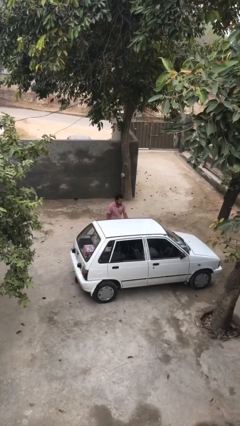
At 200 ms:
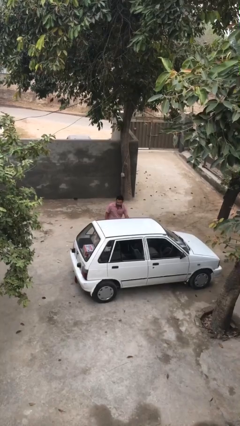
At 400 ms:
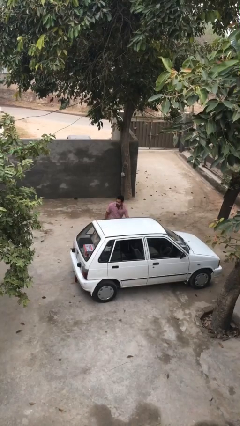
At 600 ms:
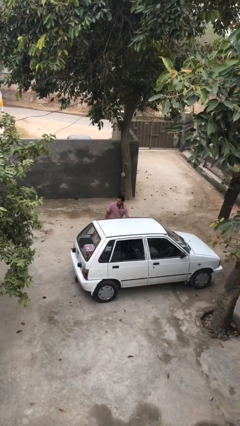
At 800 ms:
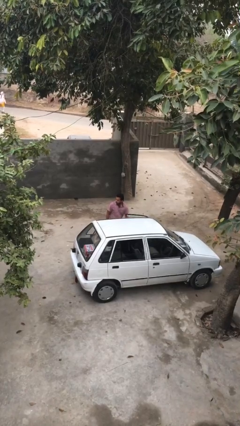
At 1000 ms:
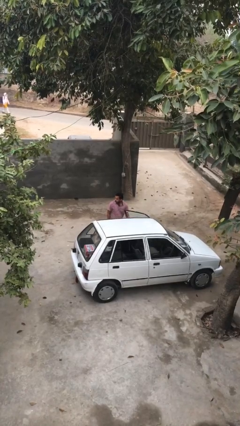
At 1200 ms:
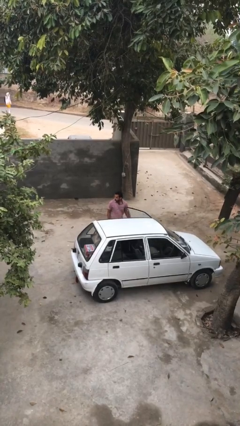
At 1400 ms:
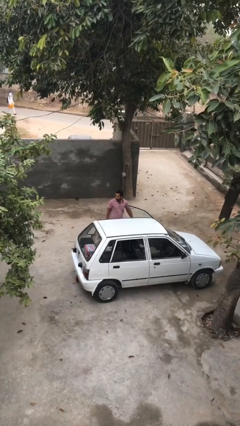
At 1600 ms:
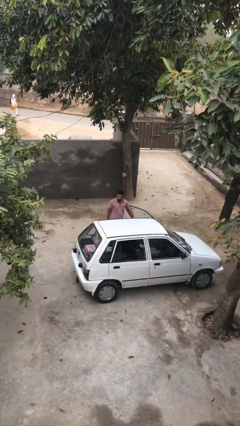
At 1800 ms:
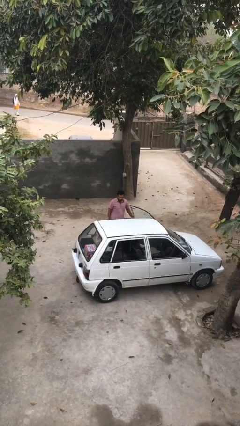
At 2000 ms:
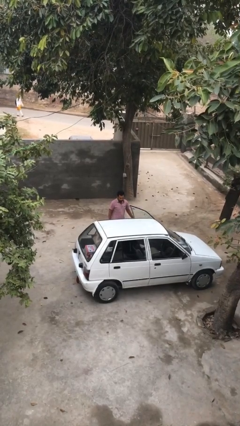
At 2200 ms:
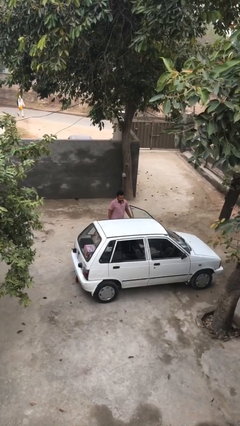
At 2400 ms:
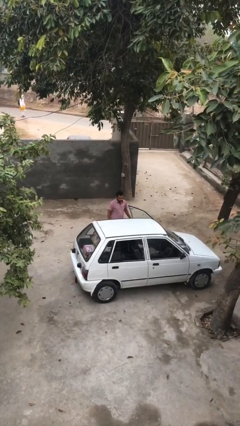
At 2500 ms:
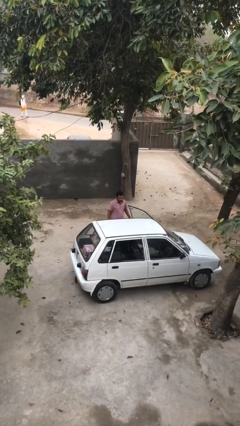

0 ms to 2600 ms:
person opens car door

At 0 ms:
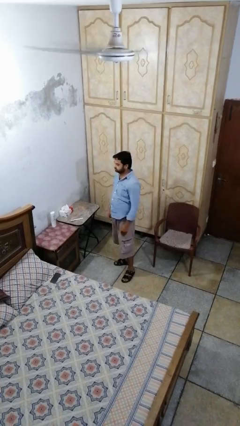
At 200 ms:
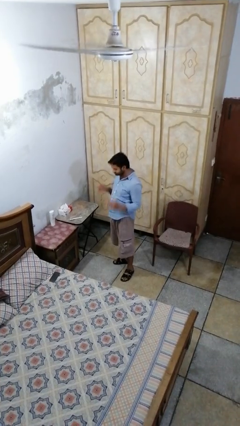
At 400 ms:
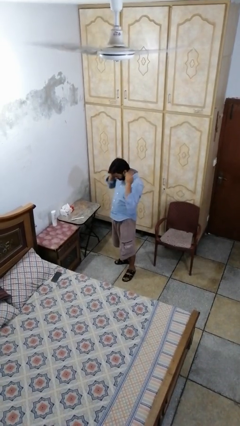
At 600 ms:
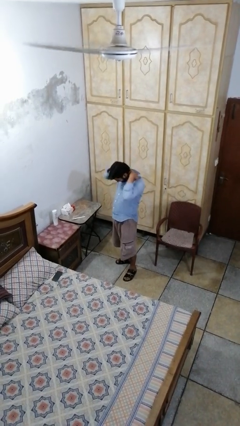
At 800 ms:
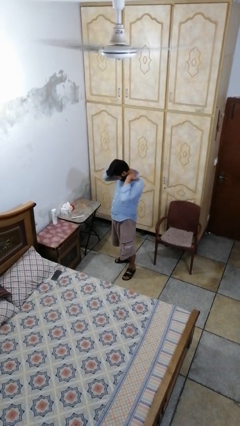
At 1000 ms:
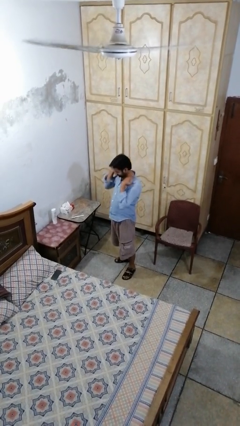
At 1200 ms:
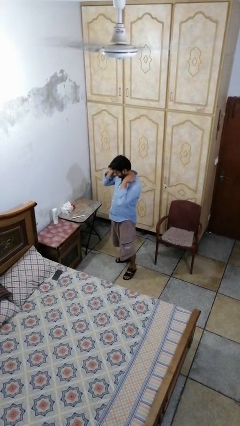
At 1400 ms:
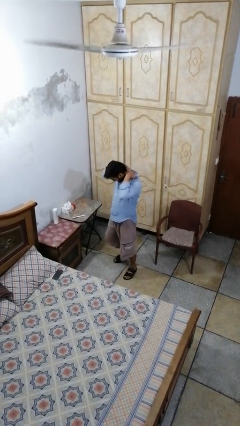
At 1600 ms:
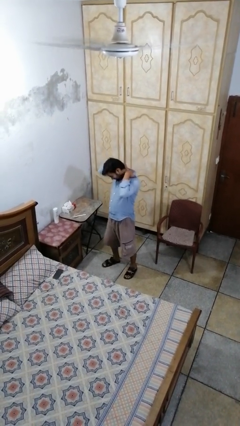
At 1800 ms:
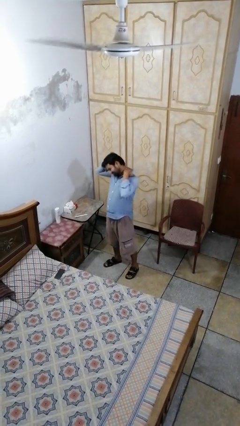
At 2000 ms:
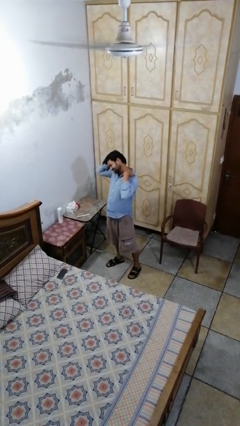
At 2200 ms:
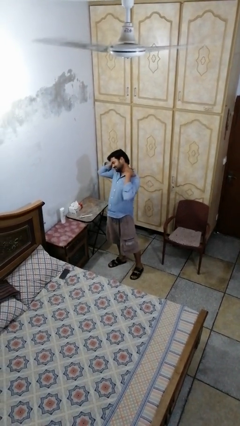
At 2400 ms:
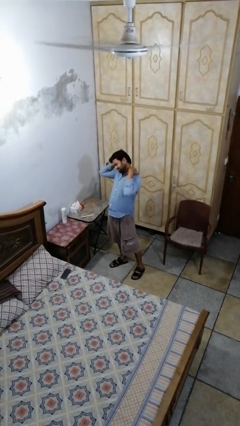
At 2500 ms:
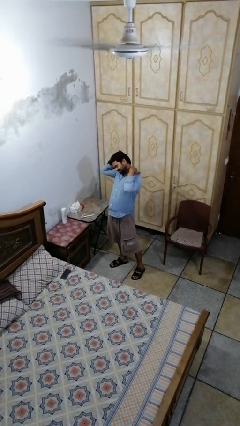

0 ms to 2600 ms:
person rubs neck

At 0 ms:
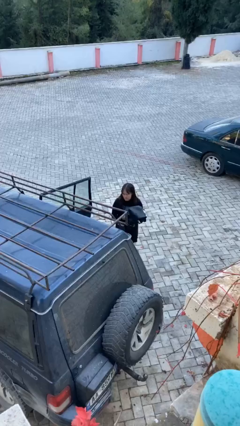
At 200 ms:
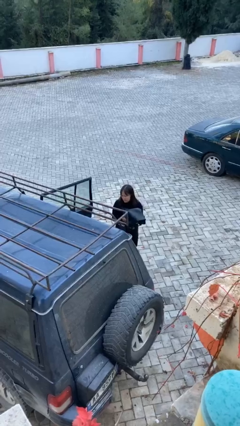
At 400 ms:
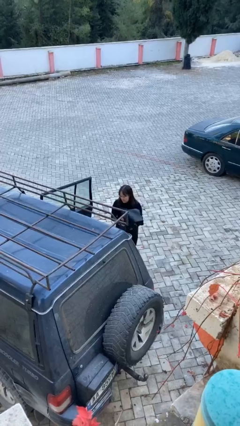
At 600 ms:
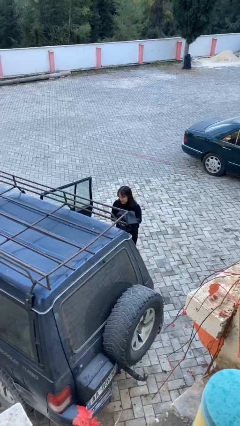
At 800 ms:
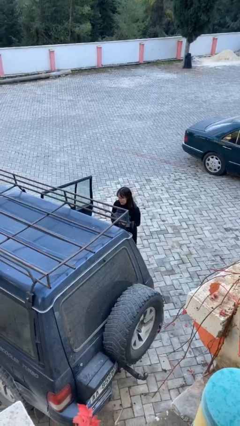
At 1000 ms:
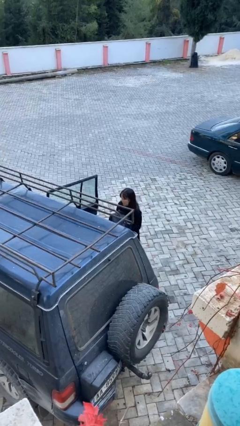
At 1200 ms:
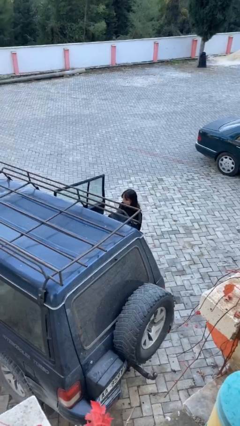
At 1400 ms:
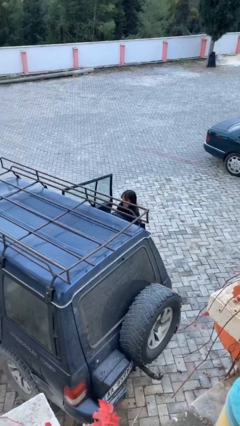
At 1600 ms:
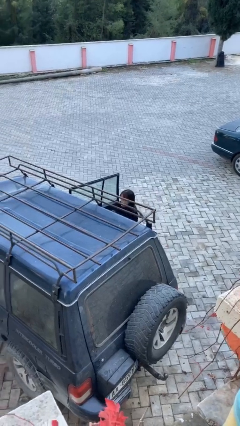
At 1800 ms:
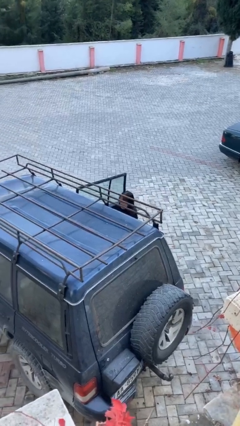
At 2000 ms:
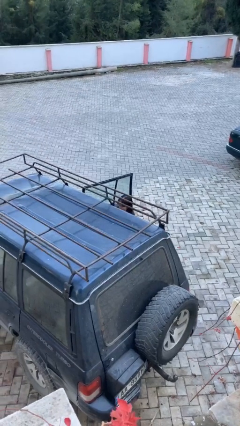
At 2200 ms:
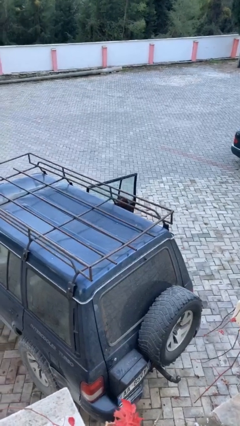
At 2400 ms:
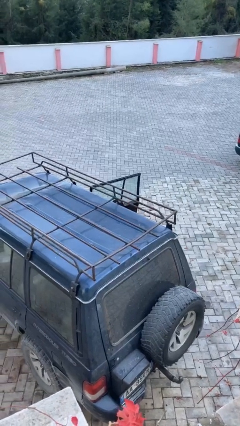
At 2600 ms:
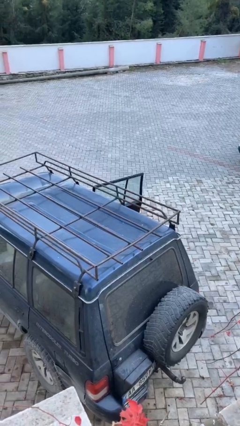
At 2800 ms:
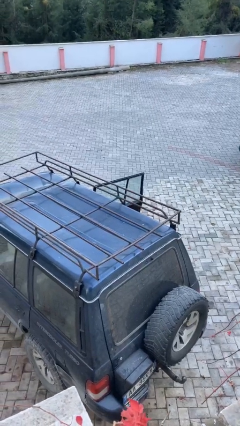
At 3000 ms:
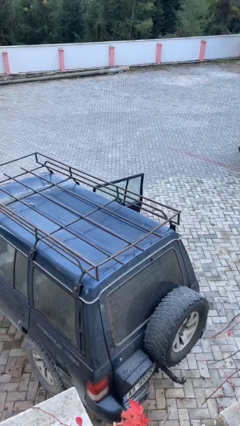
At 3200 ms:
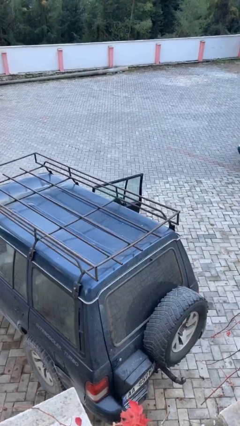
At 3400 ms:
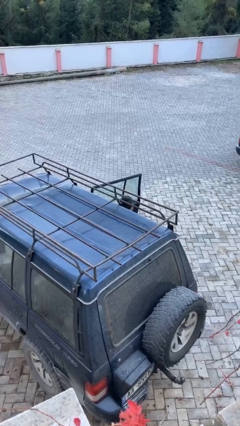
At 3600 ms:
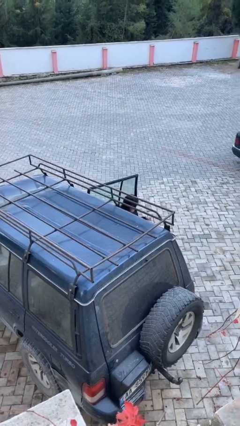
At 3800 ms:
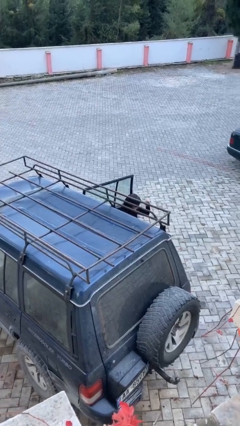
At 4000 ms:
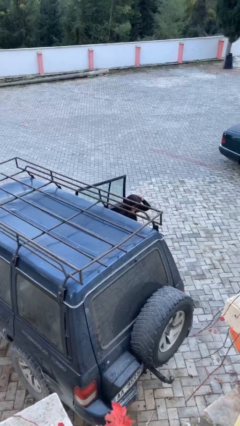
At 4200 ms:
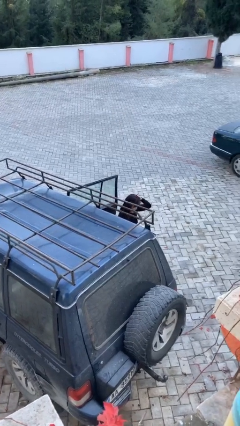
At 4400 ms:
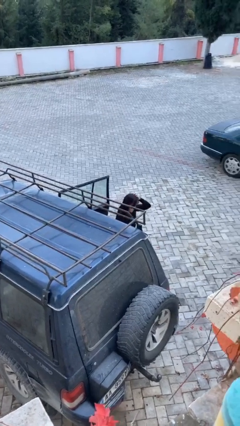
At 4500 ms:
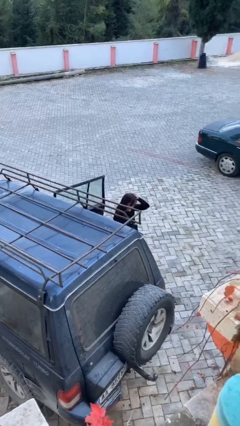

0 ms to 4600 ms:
person loads car

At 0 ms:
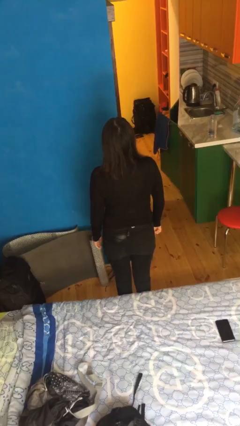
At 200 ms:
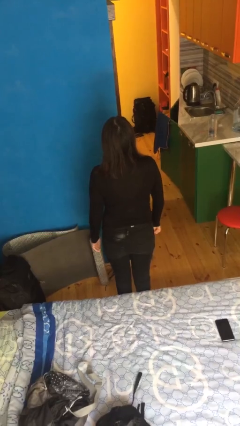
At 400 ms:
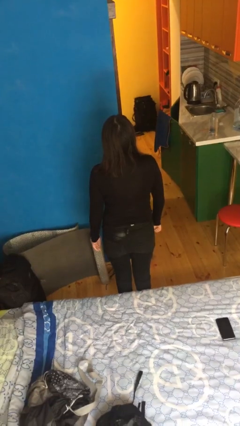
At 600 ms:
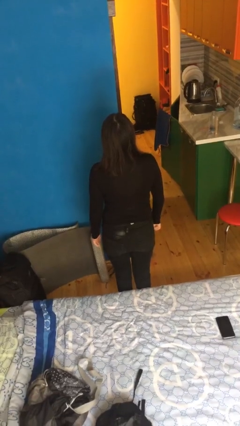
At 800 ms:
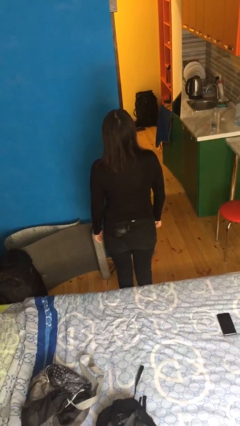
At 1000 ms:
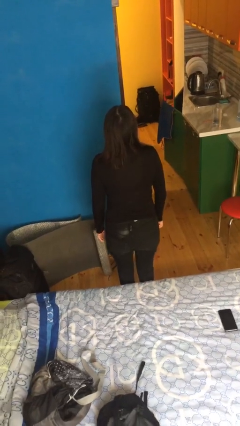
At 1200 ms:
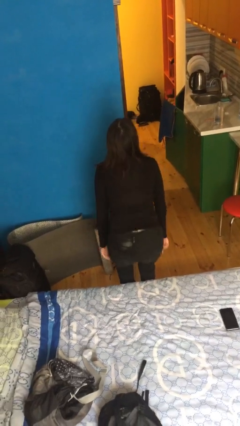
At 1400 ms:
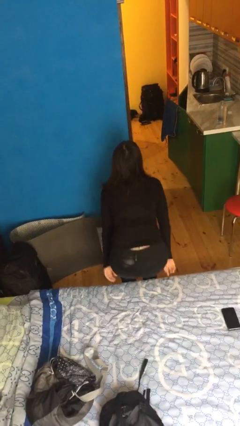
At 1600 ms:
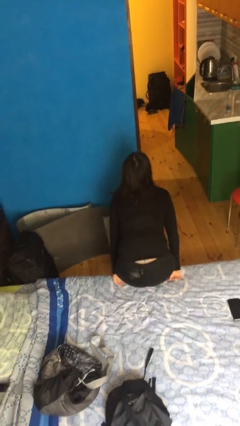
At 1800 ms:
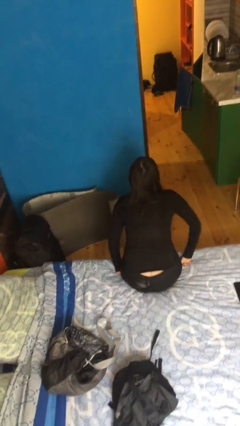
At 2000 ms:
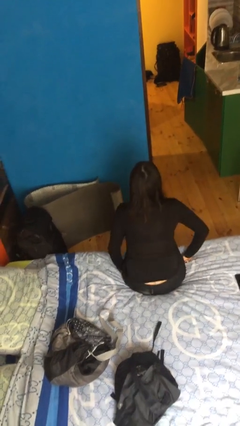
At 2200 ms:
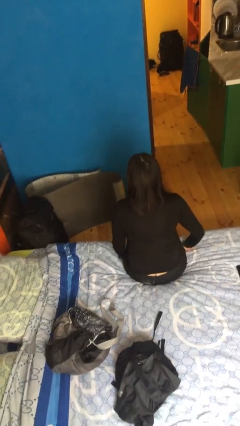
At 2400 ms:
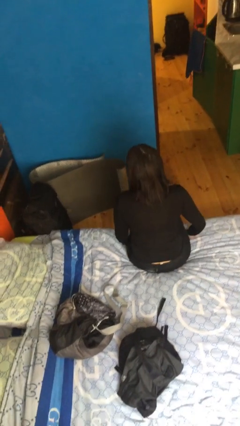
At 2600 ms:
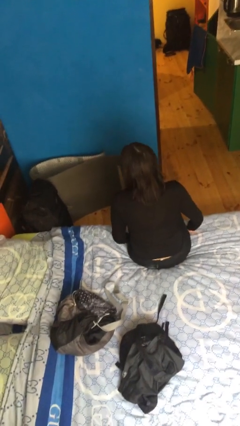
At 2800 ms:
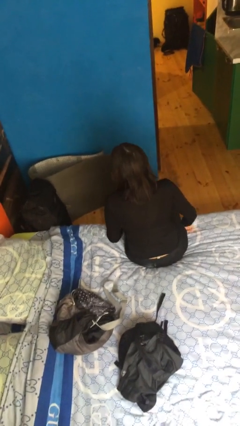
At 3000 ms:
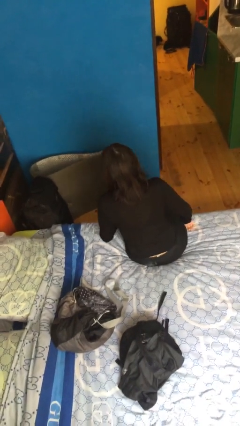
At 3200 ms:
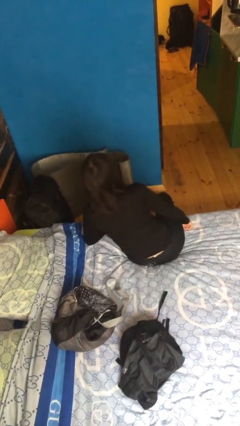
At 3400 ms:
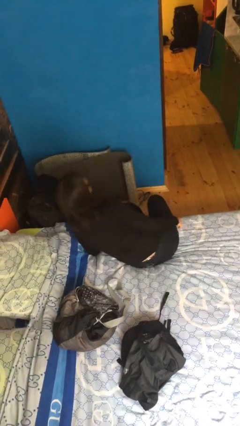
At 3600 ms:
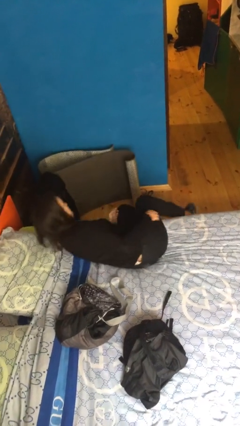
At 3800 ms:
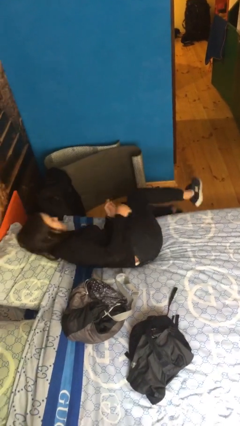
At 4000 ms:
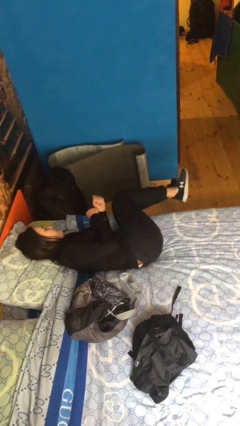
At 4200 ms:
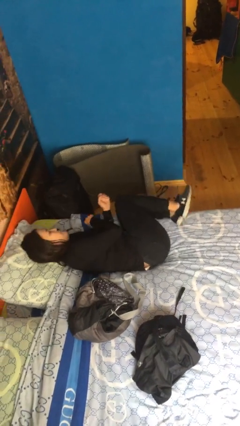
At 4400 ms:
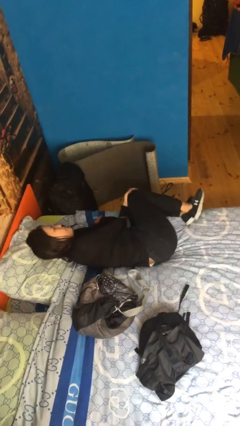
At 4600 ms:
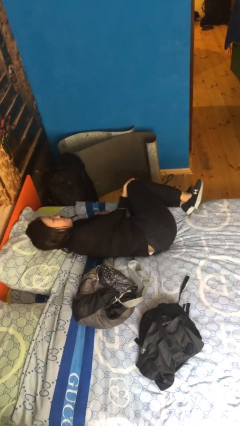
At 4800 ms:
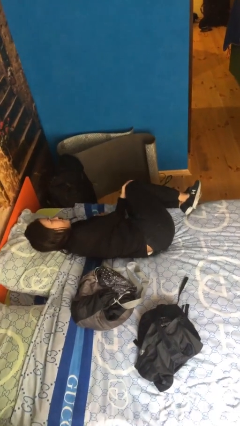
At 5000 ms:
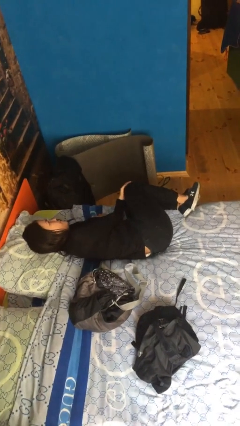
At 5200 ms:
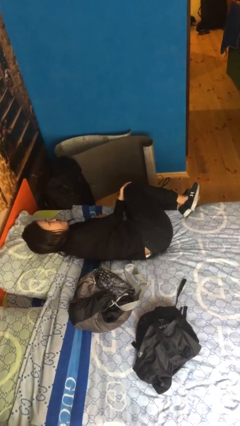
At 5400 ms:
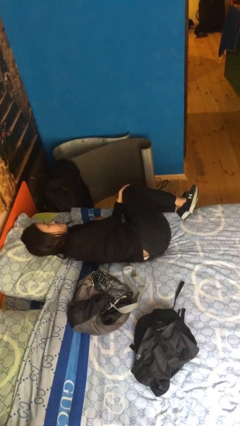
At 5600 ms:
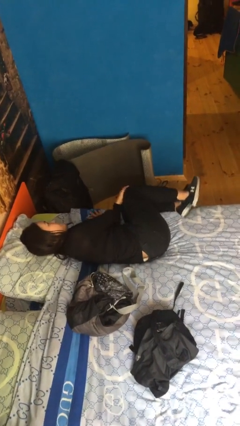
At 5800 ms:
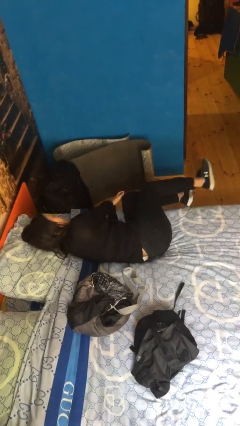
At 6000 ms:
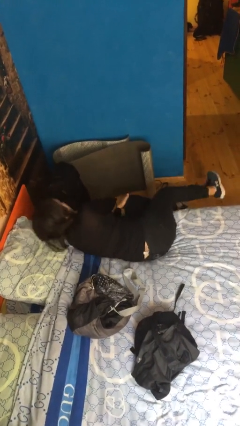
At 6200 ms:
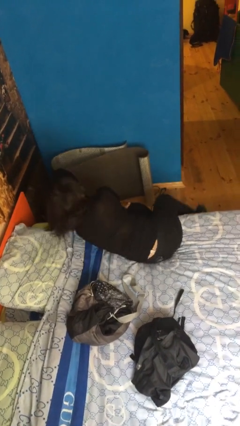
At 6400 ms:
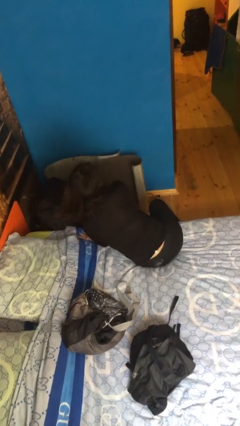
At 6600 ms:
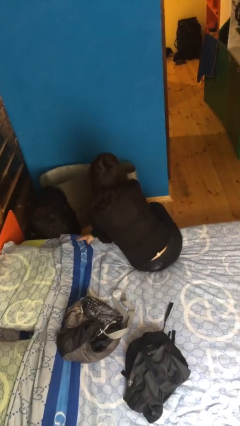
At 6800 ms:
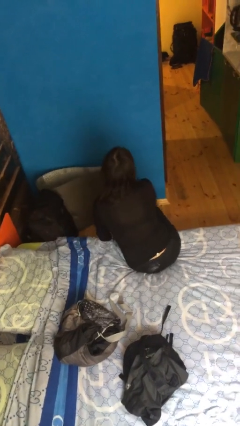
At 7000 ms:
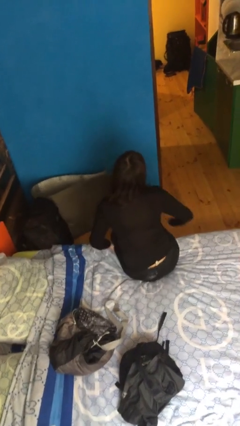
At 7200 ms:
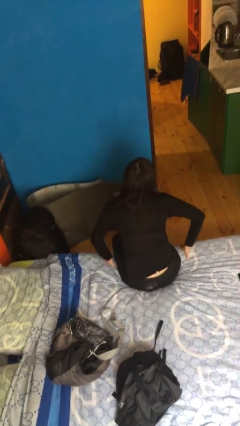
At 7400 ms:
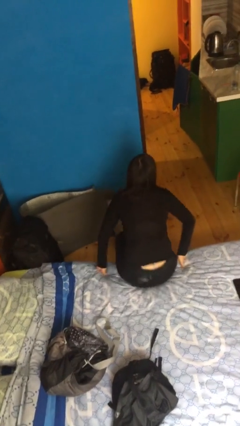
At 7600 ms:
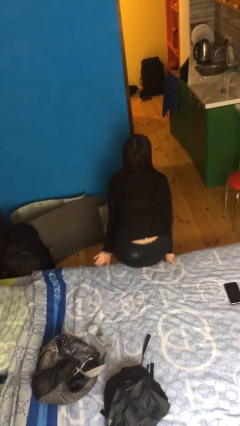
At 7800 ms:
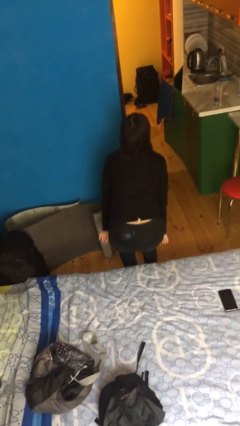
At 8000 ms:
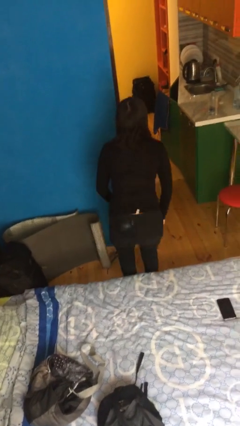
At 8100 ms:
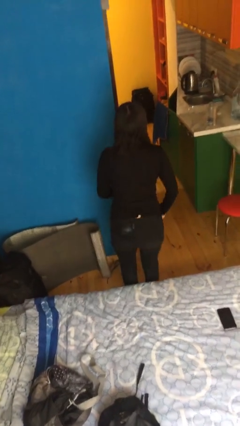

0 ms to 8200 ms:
person lies down on bed
